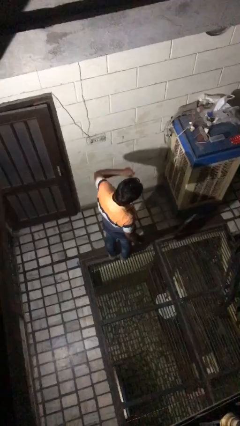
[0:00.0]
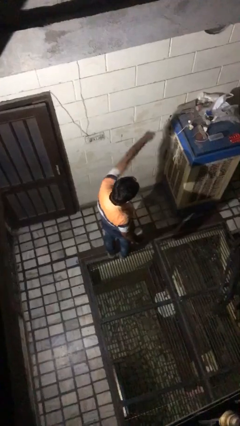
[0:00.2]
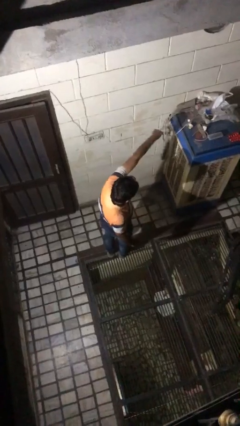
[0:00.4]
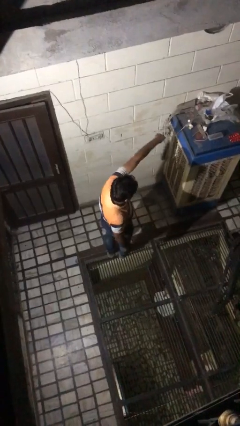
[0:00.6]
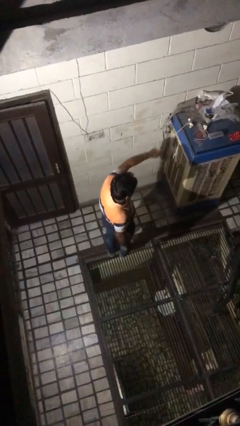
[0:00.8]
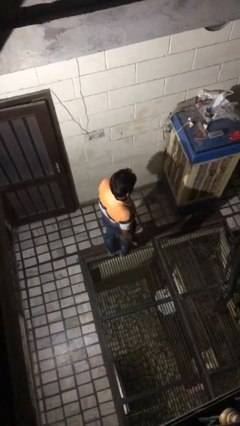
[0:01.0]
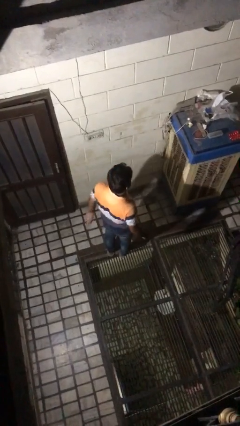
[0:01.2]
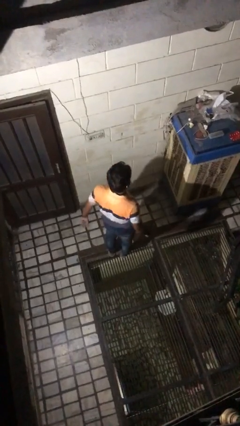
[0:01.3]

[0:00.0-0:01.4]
person punches

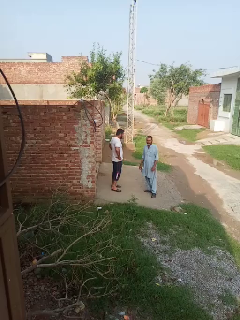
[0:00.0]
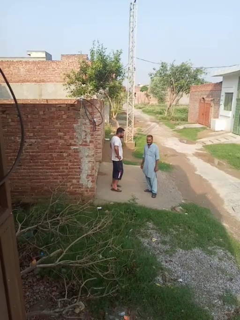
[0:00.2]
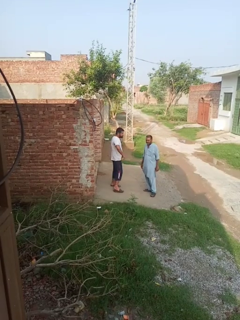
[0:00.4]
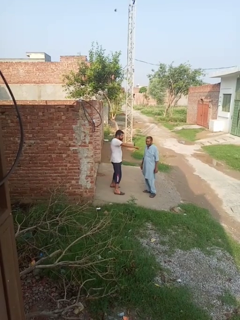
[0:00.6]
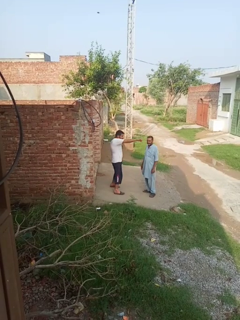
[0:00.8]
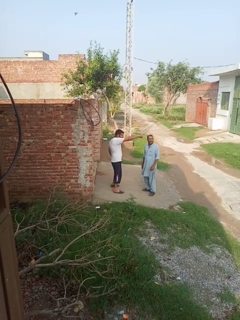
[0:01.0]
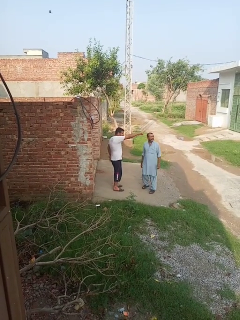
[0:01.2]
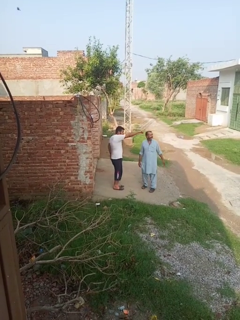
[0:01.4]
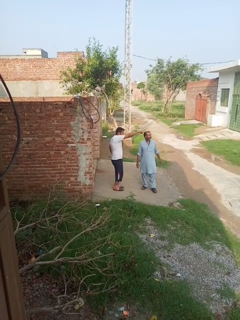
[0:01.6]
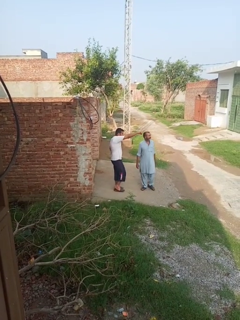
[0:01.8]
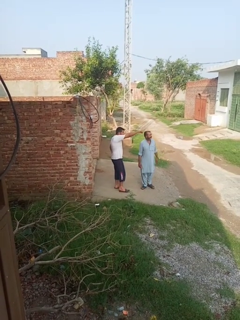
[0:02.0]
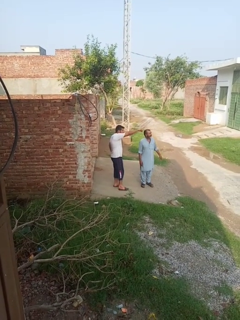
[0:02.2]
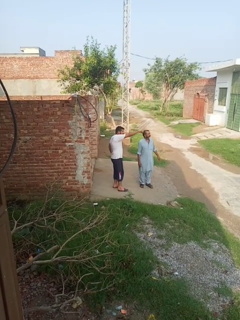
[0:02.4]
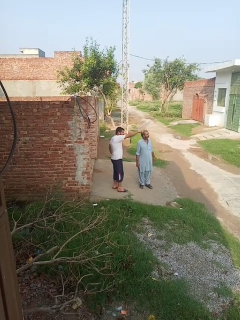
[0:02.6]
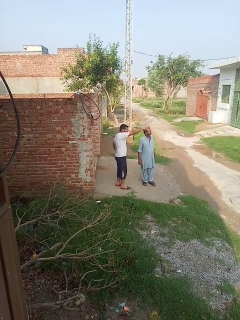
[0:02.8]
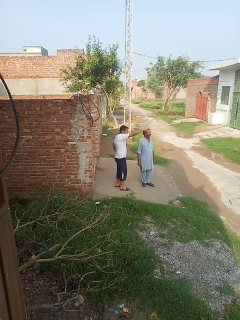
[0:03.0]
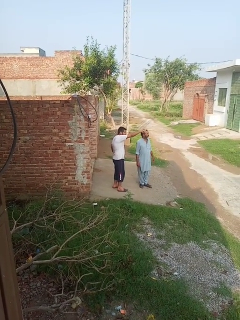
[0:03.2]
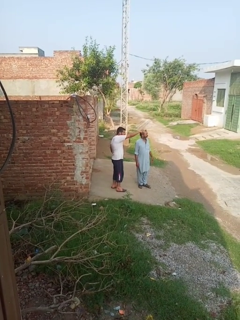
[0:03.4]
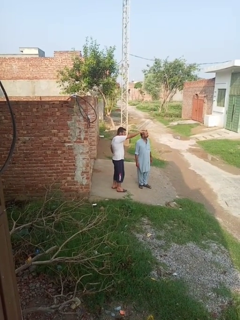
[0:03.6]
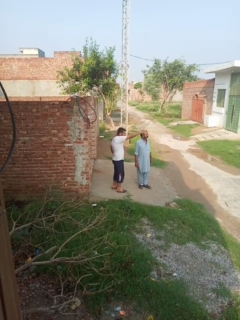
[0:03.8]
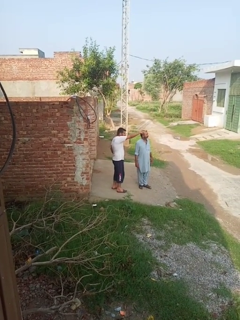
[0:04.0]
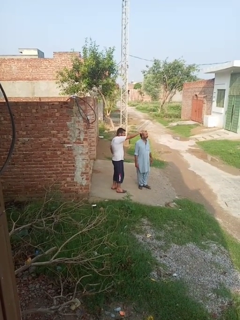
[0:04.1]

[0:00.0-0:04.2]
person points at person

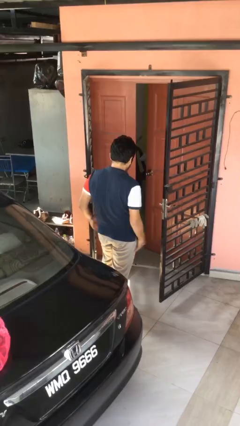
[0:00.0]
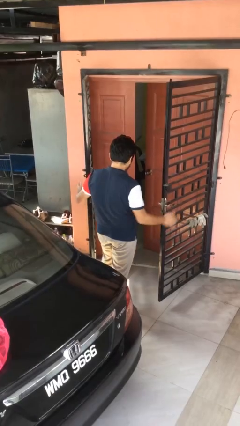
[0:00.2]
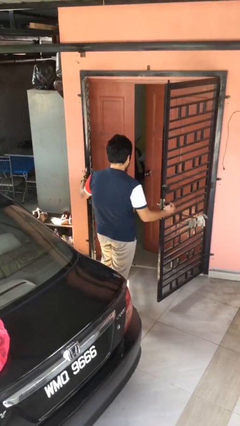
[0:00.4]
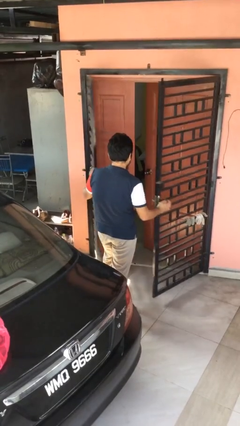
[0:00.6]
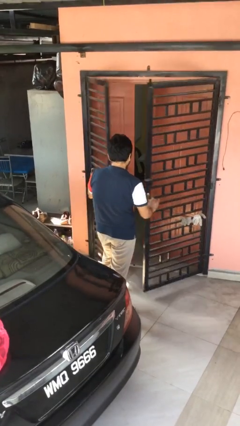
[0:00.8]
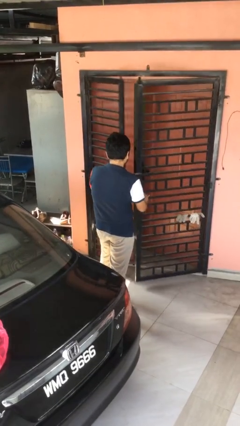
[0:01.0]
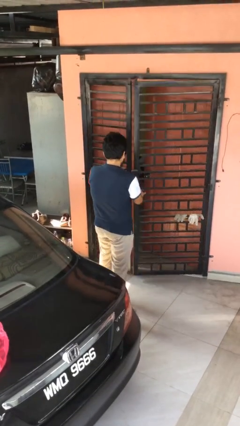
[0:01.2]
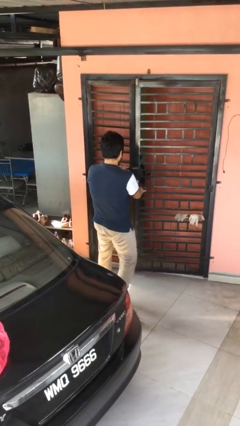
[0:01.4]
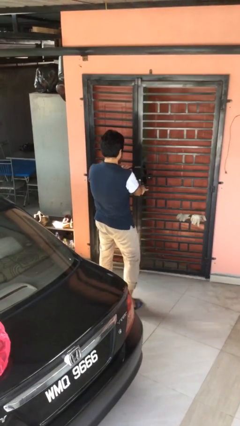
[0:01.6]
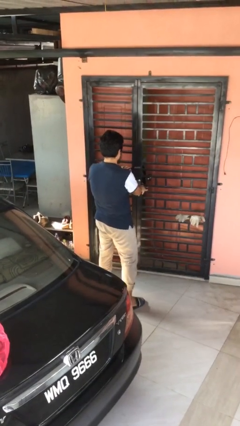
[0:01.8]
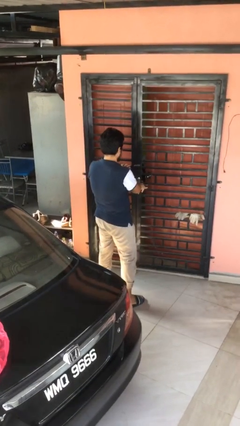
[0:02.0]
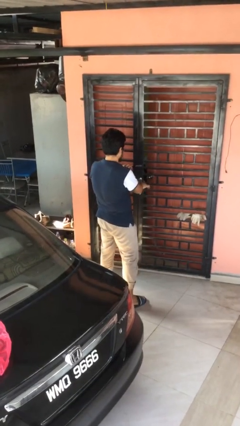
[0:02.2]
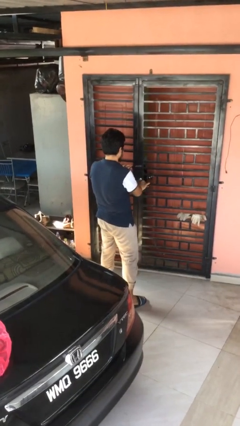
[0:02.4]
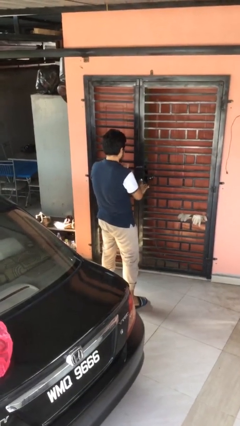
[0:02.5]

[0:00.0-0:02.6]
person closes gate

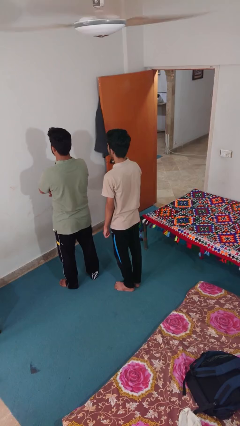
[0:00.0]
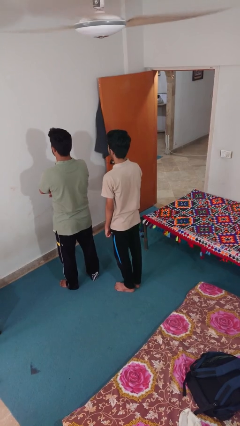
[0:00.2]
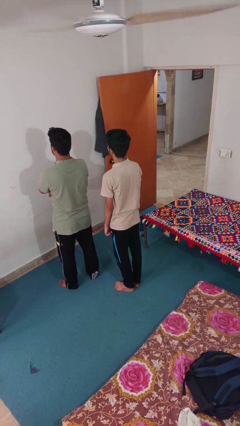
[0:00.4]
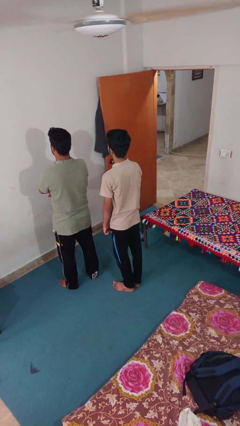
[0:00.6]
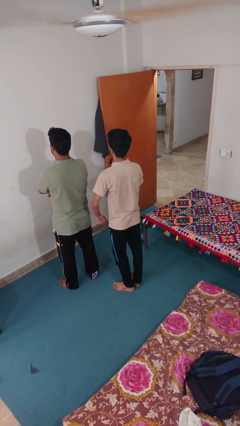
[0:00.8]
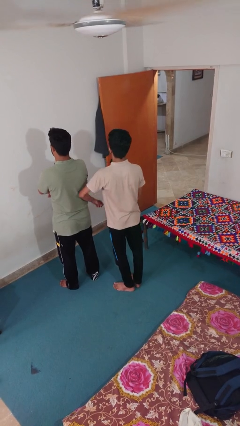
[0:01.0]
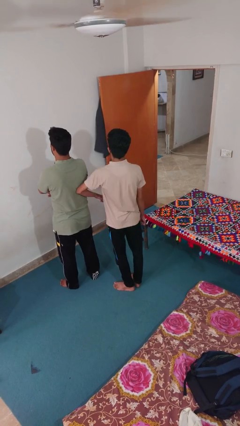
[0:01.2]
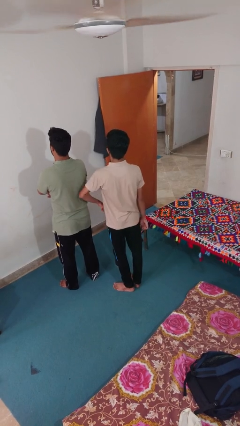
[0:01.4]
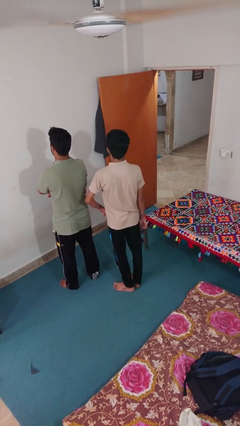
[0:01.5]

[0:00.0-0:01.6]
person nudges person with elbow

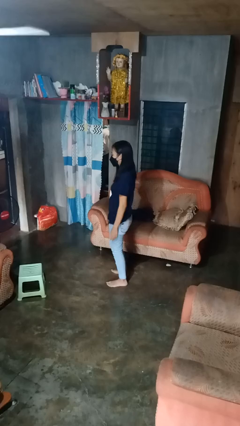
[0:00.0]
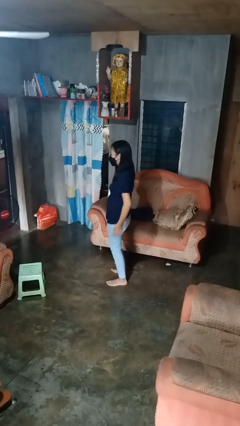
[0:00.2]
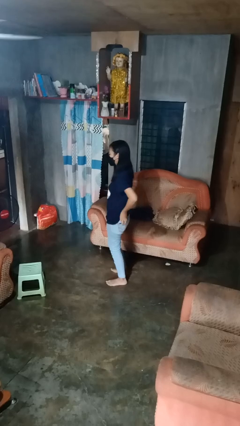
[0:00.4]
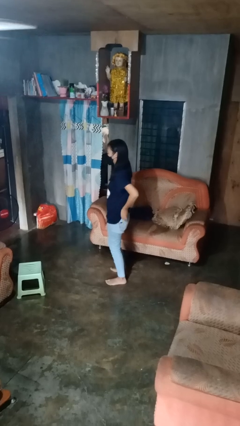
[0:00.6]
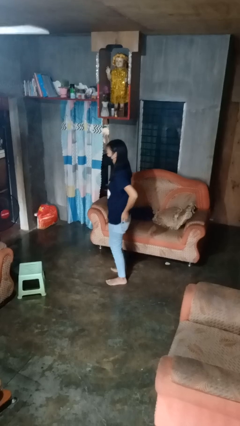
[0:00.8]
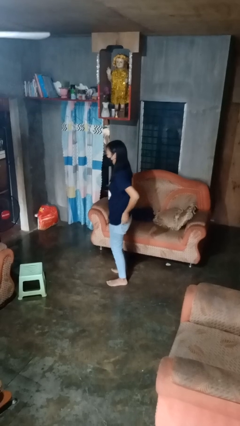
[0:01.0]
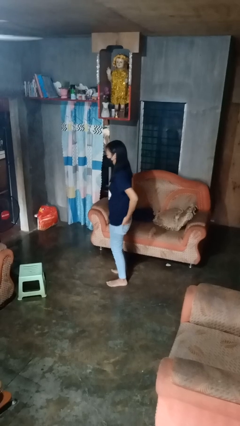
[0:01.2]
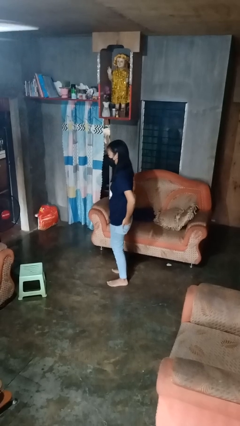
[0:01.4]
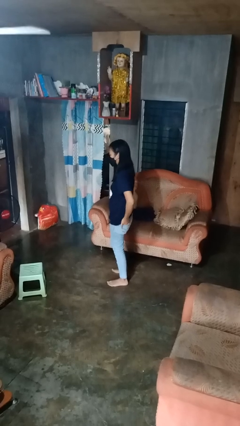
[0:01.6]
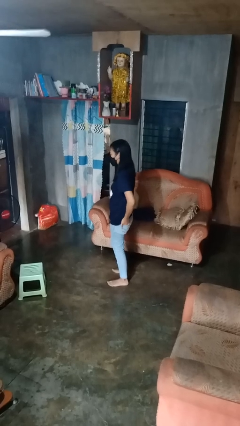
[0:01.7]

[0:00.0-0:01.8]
person puts hands in back pockets

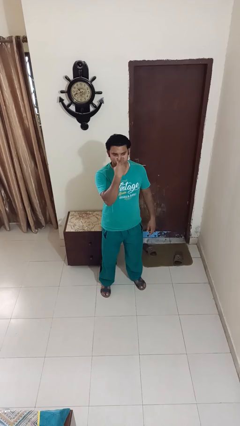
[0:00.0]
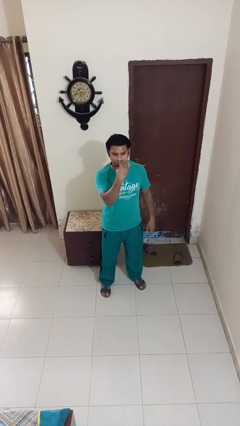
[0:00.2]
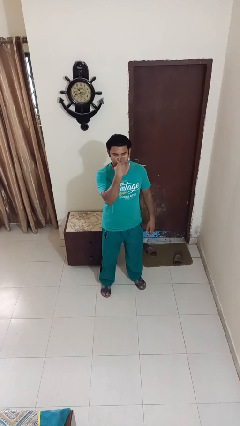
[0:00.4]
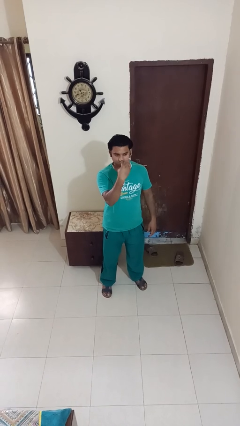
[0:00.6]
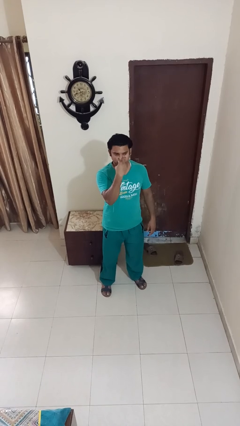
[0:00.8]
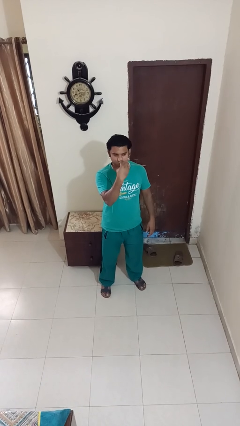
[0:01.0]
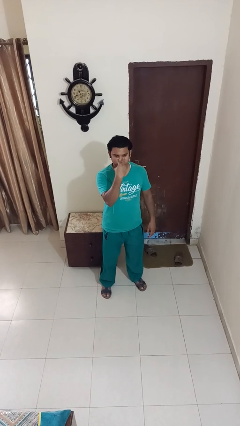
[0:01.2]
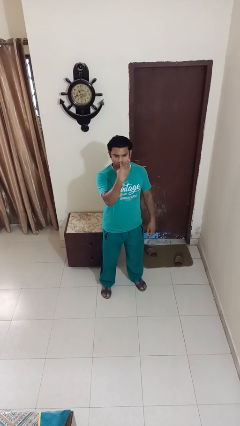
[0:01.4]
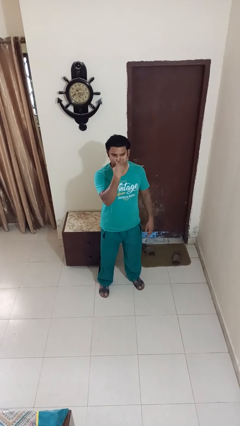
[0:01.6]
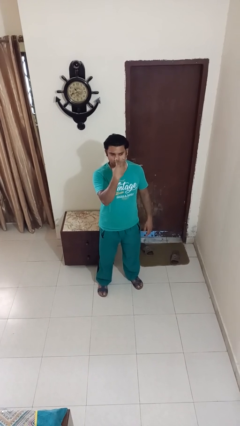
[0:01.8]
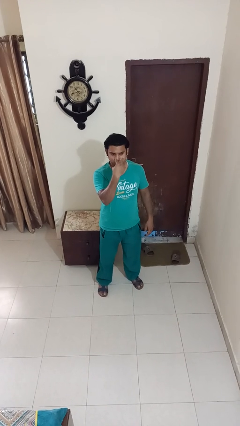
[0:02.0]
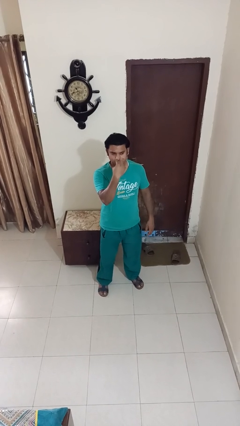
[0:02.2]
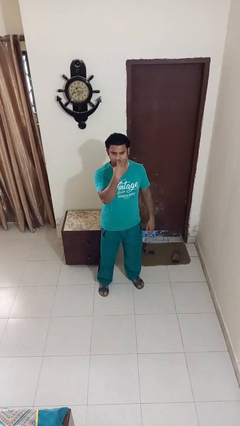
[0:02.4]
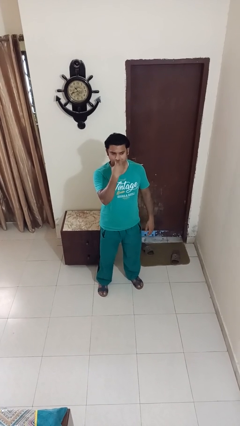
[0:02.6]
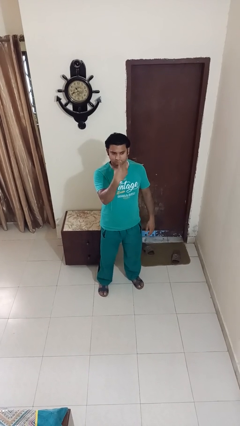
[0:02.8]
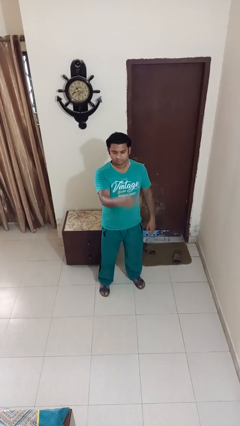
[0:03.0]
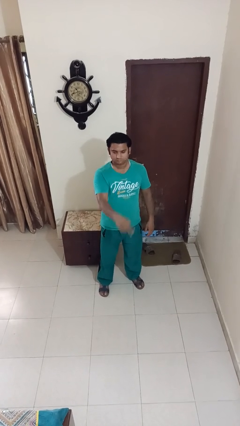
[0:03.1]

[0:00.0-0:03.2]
person gestures watch closely

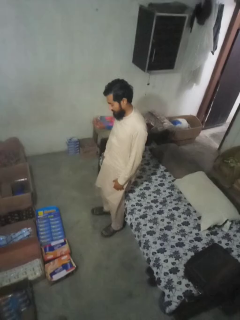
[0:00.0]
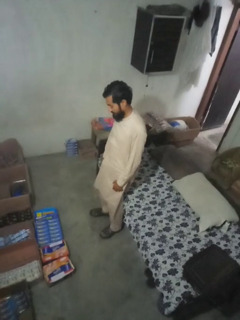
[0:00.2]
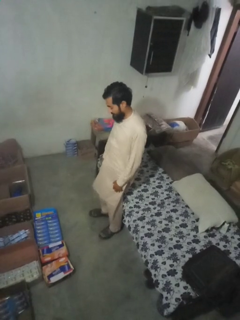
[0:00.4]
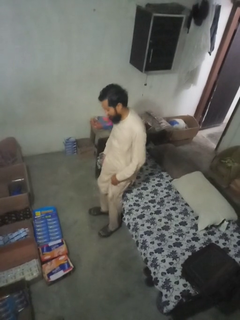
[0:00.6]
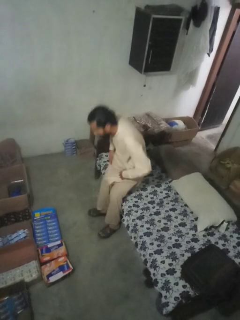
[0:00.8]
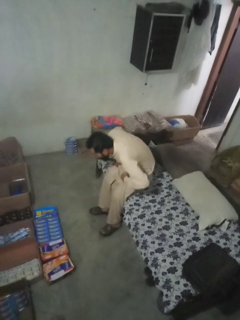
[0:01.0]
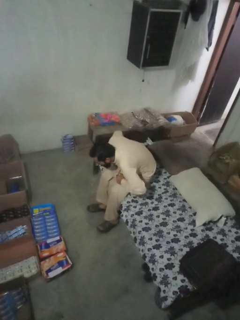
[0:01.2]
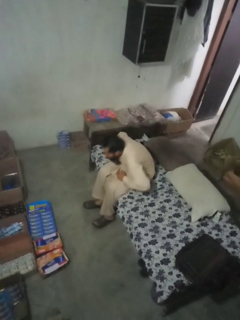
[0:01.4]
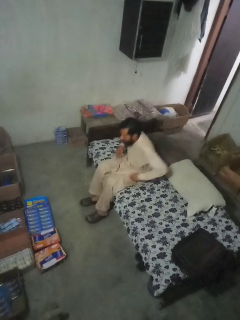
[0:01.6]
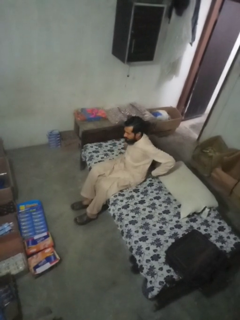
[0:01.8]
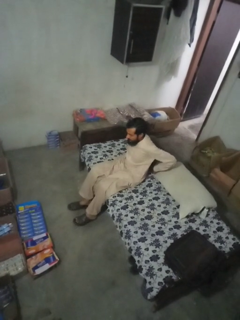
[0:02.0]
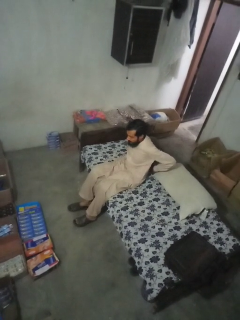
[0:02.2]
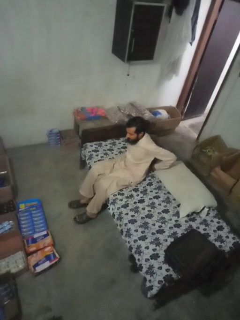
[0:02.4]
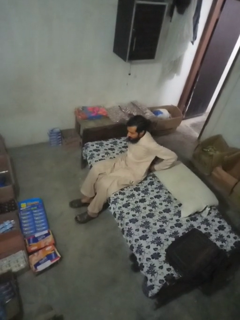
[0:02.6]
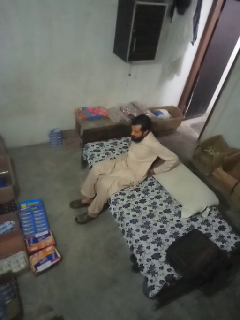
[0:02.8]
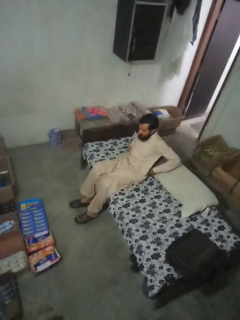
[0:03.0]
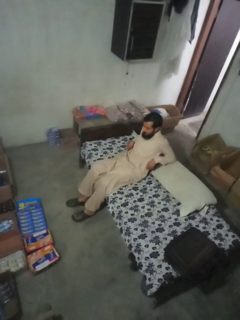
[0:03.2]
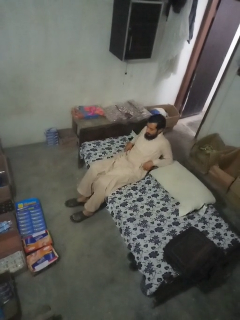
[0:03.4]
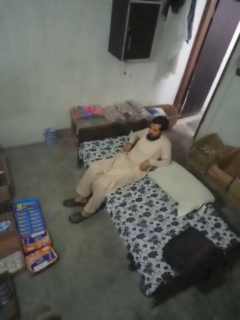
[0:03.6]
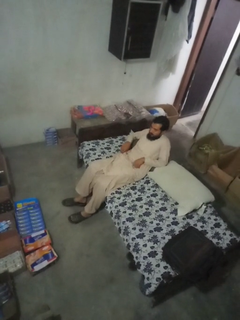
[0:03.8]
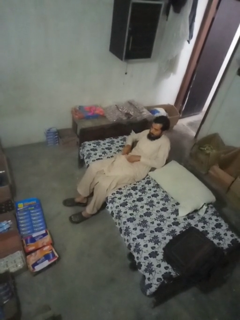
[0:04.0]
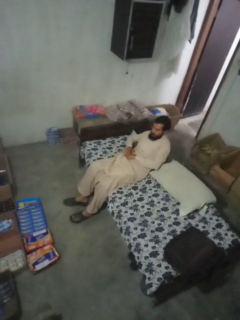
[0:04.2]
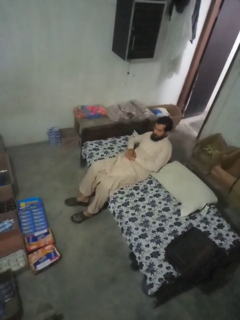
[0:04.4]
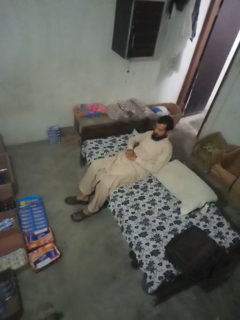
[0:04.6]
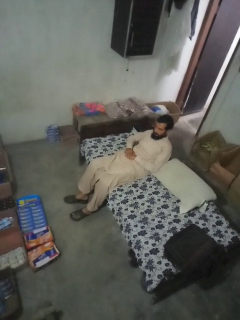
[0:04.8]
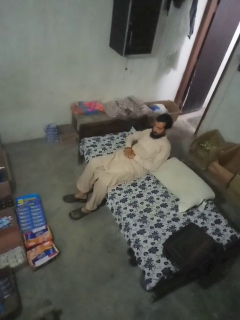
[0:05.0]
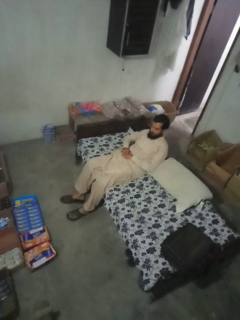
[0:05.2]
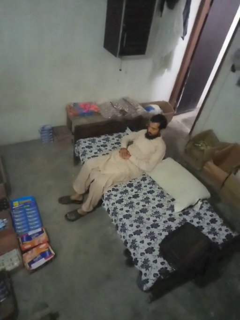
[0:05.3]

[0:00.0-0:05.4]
person lies down on couch
